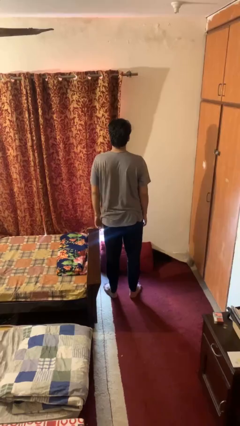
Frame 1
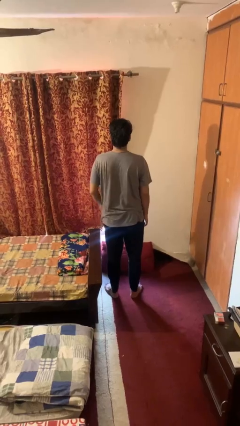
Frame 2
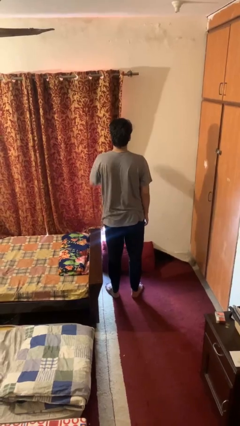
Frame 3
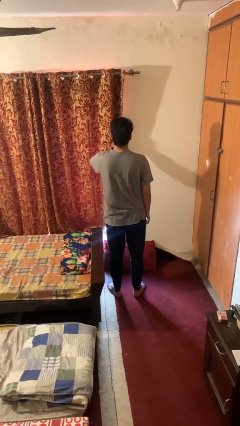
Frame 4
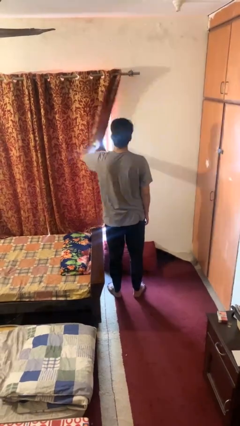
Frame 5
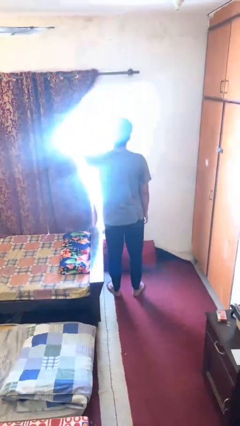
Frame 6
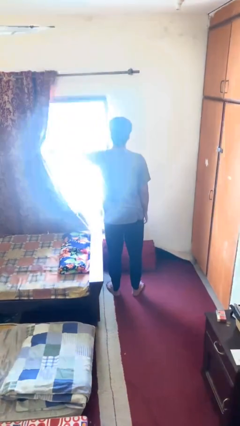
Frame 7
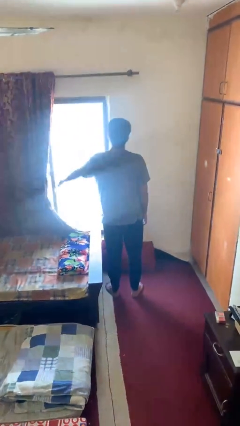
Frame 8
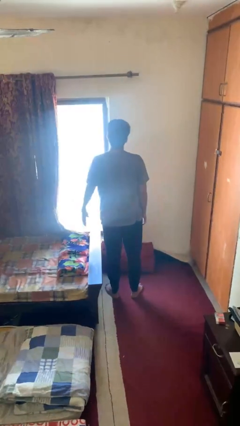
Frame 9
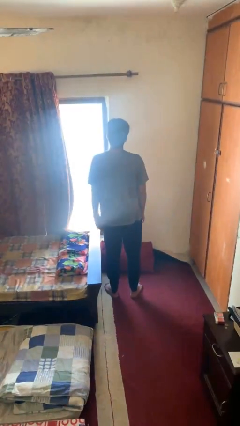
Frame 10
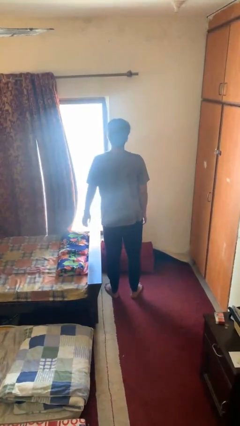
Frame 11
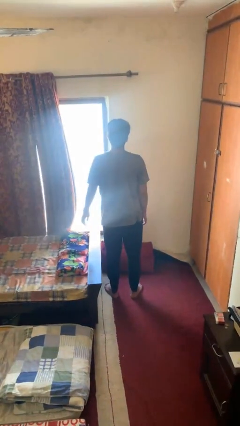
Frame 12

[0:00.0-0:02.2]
person opens curtains

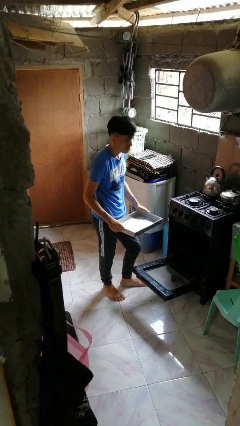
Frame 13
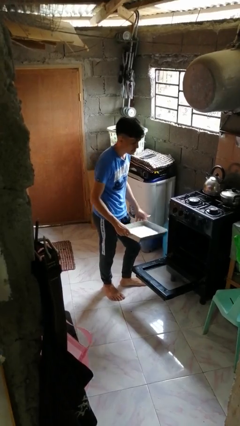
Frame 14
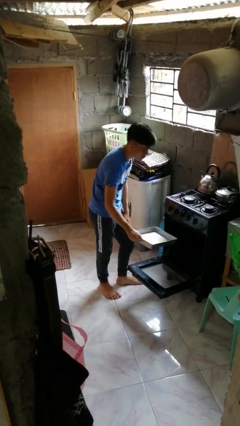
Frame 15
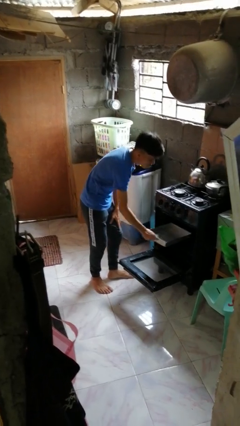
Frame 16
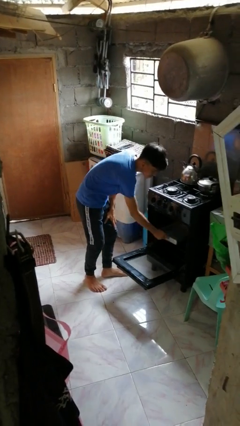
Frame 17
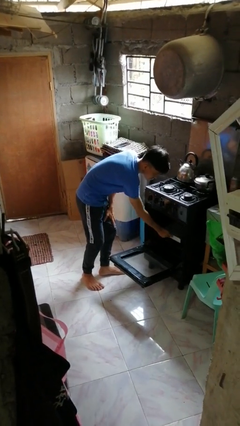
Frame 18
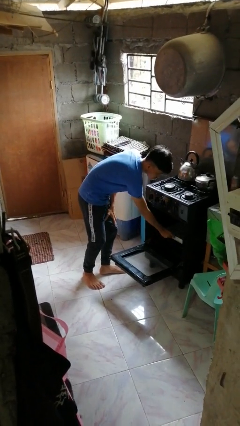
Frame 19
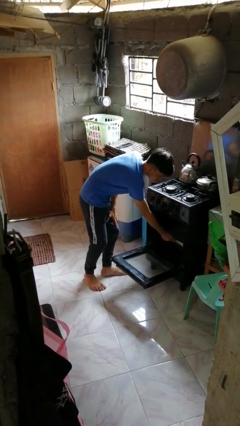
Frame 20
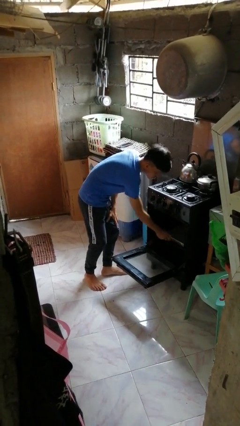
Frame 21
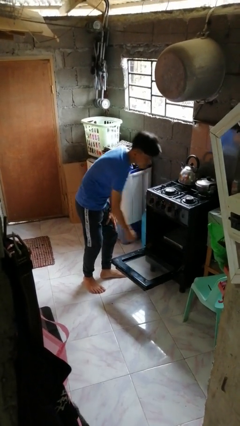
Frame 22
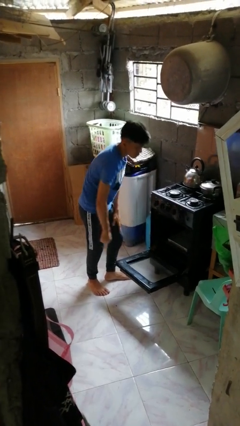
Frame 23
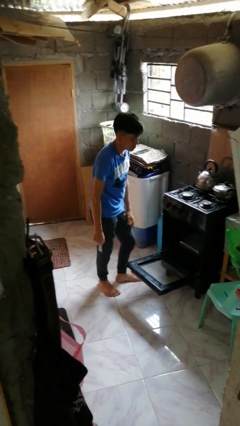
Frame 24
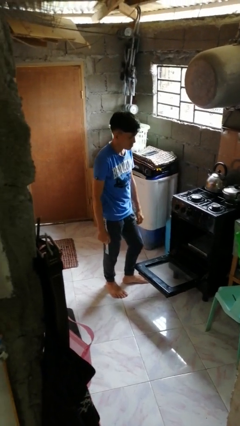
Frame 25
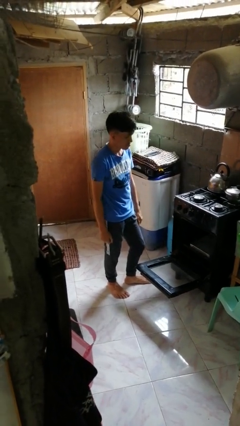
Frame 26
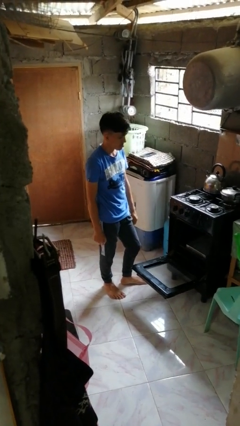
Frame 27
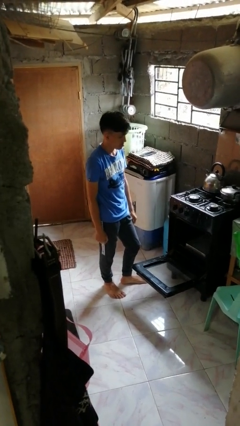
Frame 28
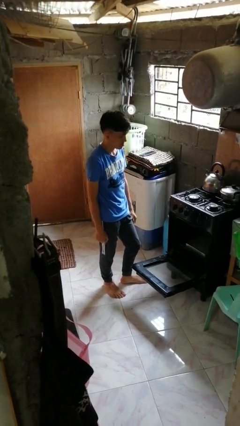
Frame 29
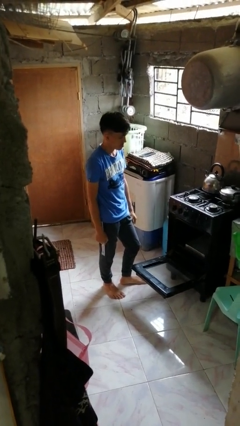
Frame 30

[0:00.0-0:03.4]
person puts object into oven

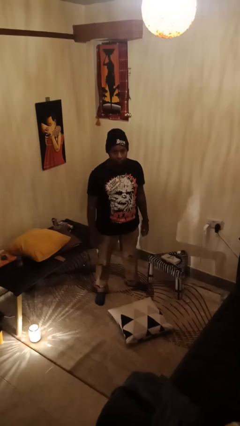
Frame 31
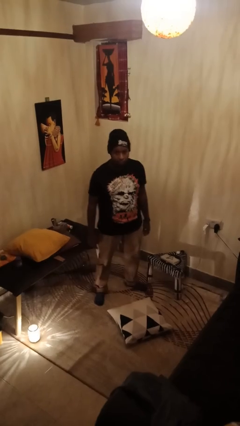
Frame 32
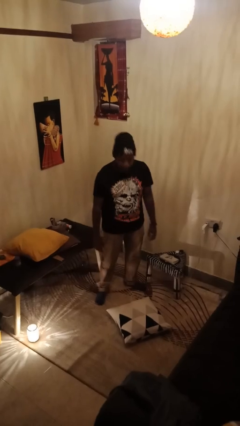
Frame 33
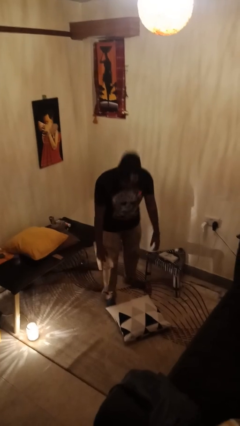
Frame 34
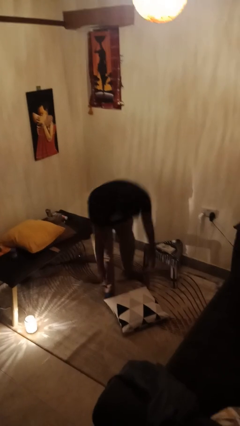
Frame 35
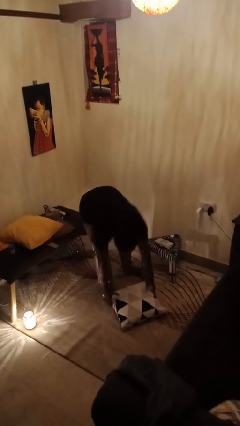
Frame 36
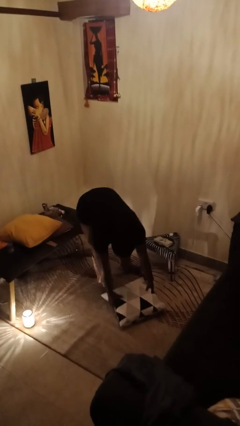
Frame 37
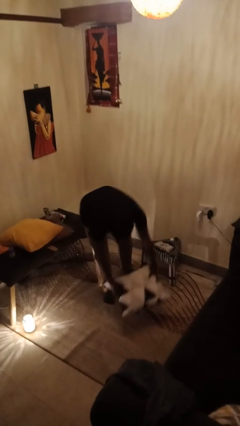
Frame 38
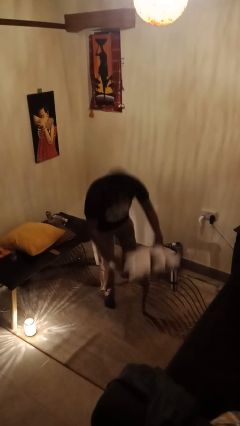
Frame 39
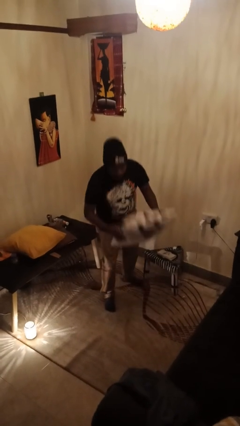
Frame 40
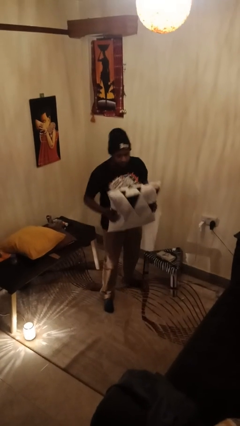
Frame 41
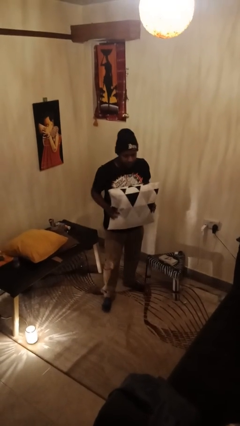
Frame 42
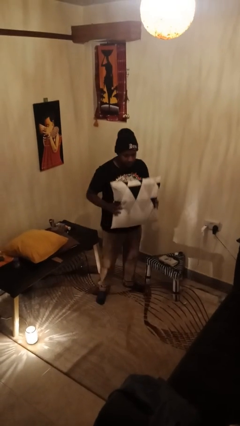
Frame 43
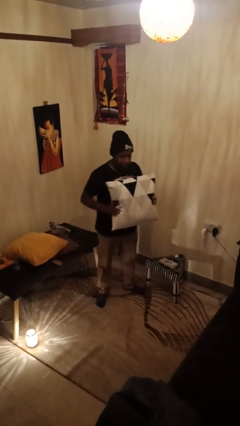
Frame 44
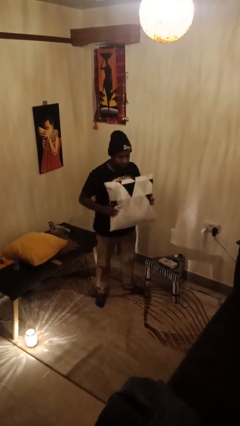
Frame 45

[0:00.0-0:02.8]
person picks up object from floor

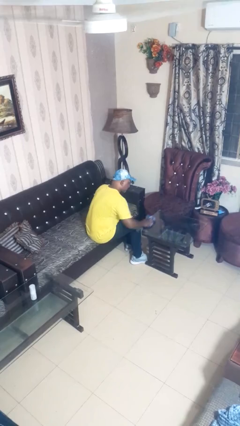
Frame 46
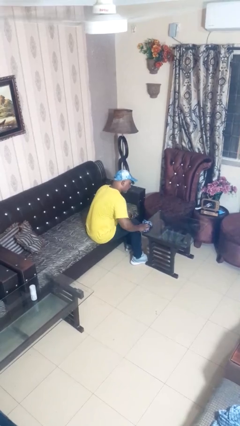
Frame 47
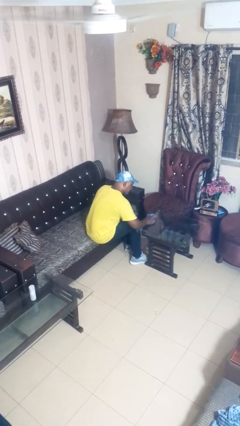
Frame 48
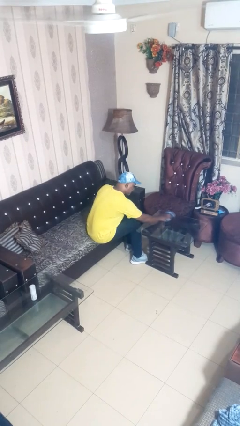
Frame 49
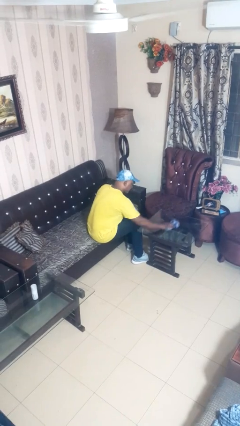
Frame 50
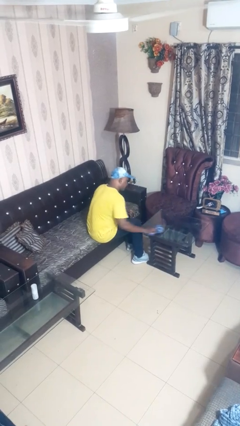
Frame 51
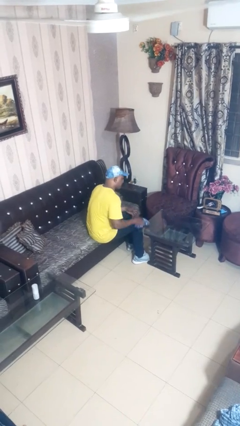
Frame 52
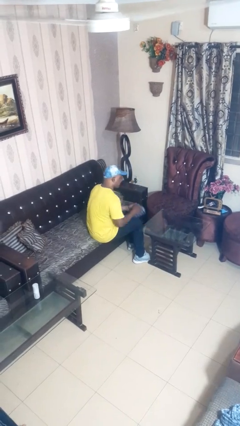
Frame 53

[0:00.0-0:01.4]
person cleans table with rag

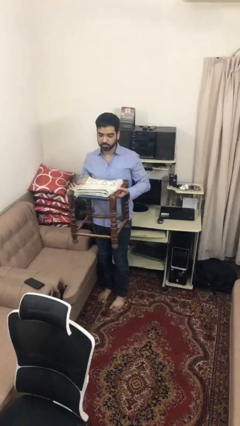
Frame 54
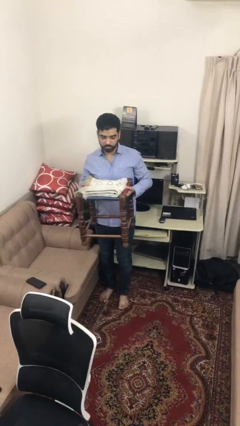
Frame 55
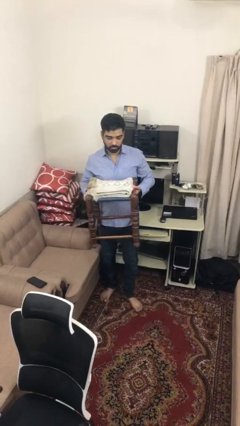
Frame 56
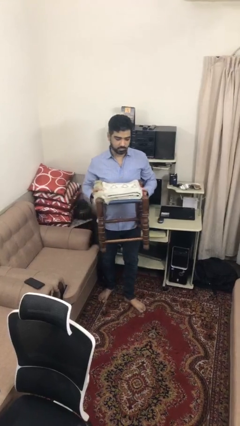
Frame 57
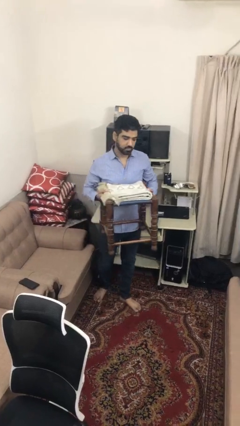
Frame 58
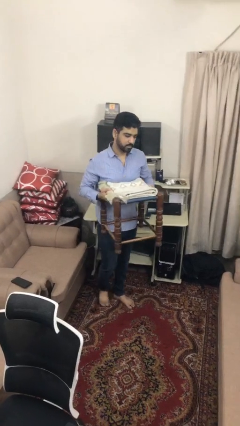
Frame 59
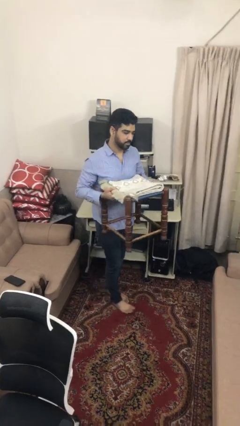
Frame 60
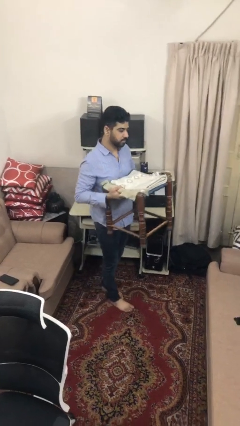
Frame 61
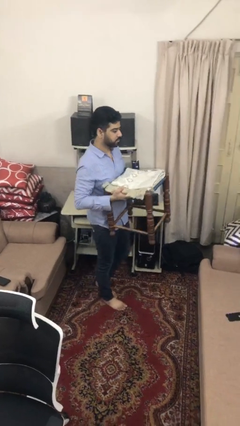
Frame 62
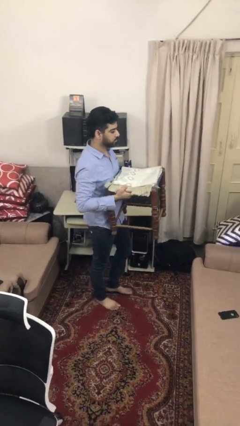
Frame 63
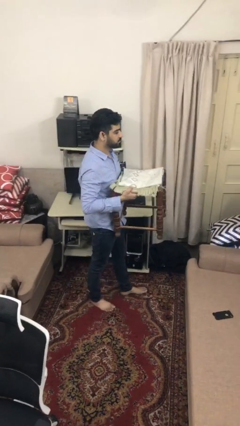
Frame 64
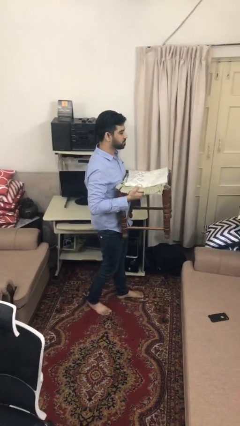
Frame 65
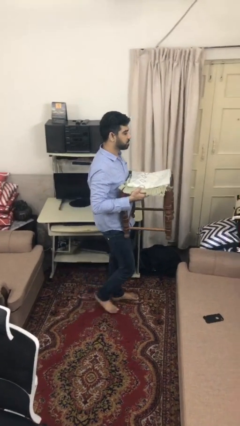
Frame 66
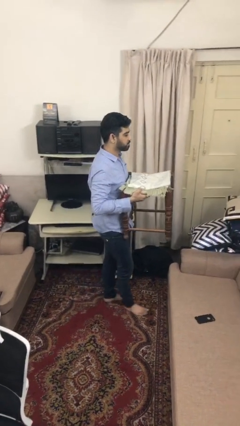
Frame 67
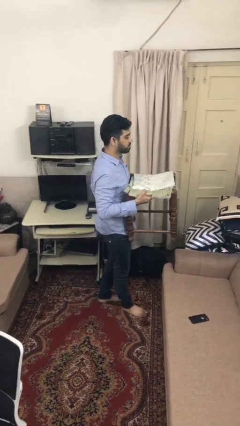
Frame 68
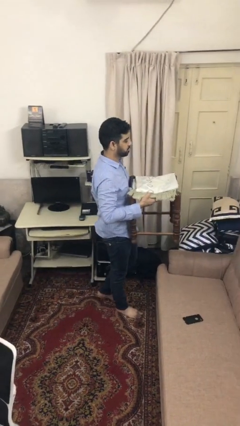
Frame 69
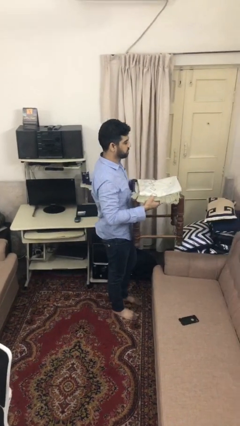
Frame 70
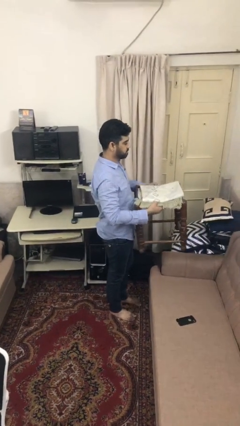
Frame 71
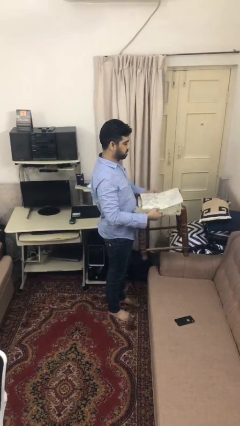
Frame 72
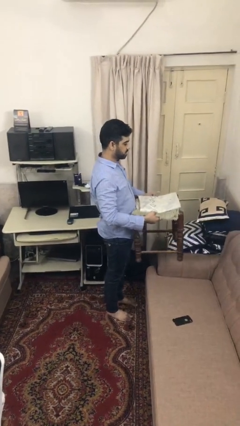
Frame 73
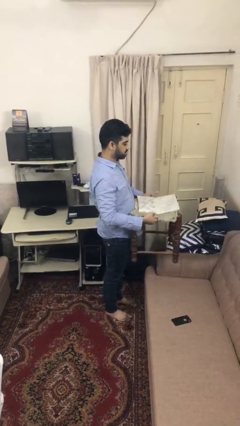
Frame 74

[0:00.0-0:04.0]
person carries furniture

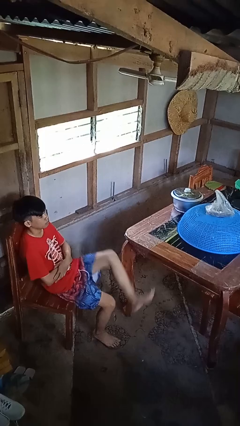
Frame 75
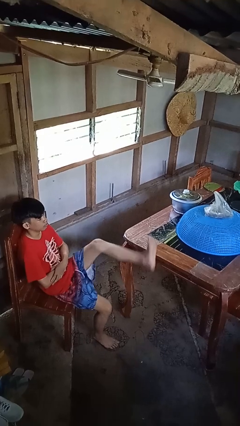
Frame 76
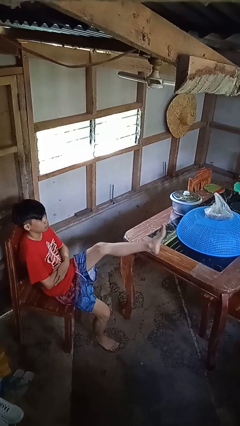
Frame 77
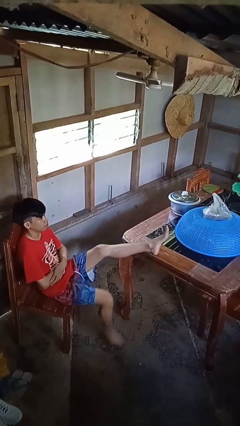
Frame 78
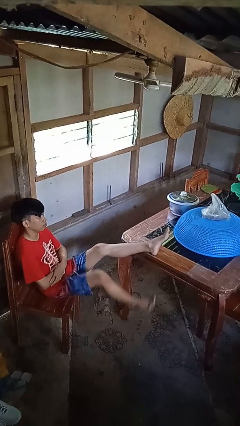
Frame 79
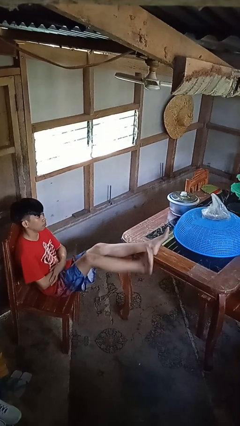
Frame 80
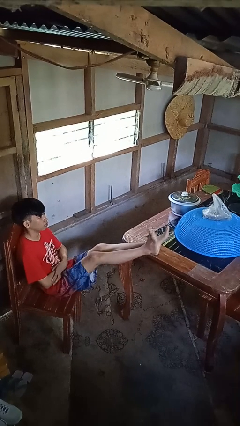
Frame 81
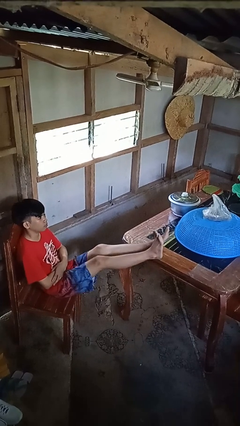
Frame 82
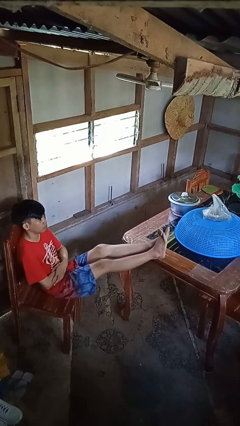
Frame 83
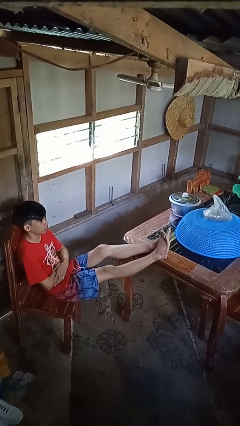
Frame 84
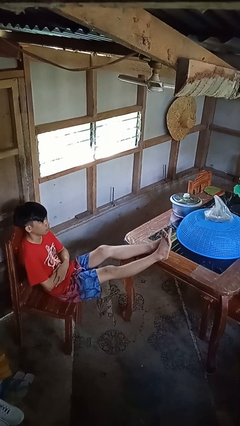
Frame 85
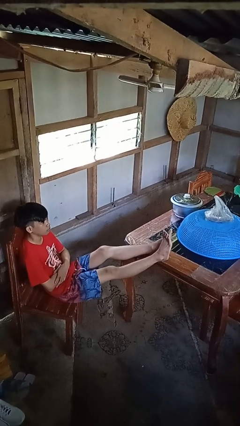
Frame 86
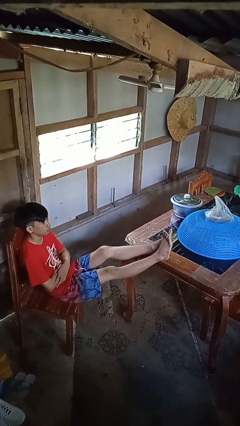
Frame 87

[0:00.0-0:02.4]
person puts feet up

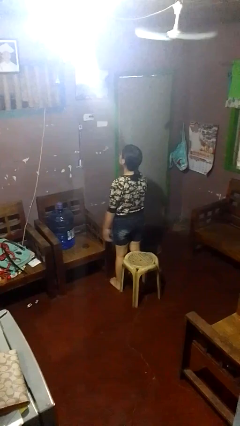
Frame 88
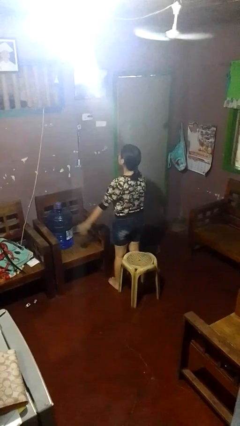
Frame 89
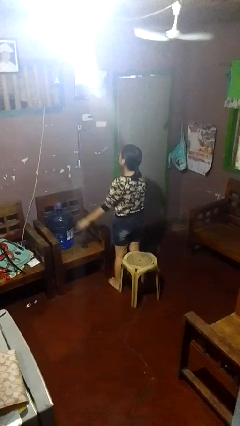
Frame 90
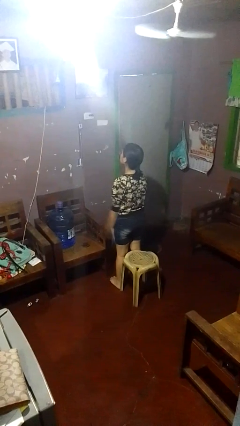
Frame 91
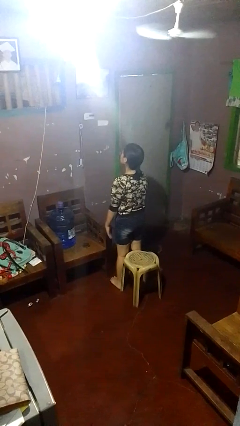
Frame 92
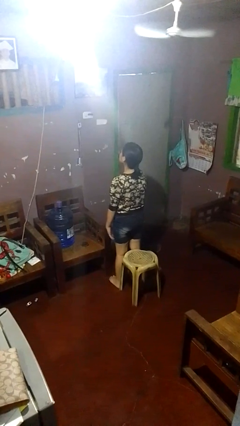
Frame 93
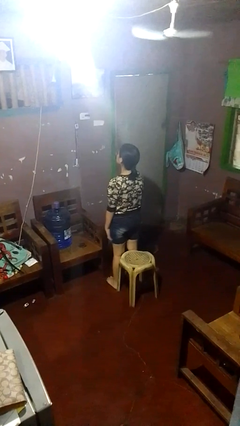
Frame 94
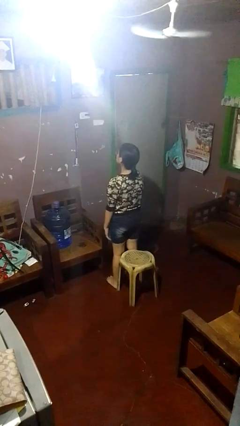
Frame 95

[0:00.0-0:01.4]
person slaps hands on thighs
